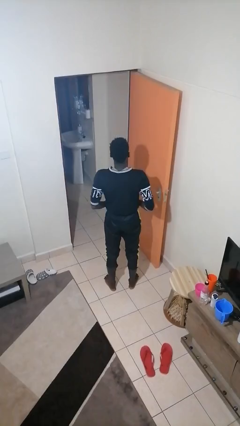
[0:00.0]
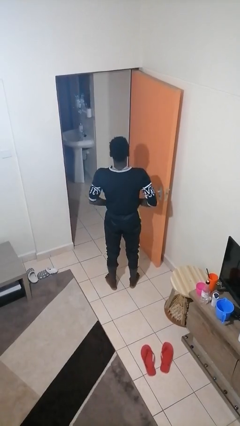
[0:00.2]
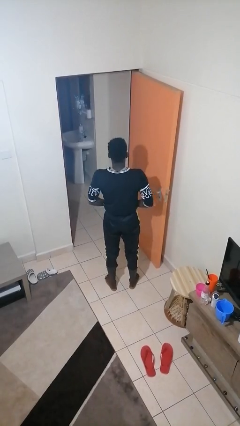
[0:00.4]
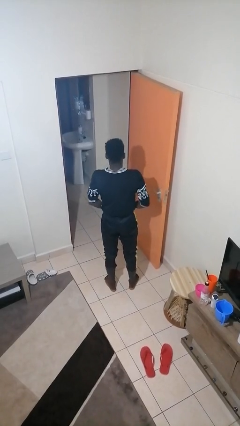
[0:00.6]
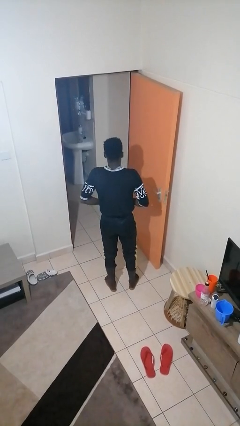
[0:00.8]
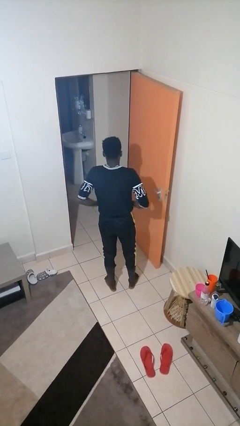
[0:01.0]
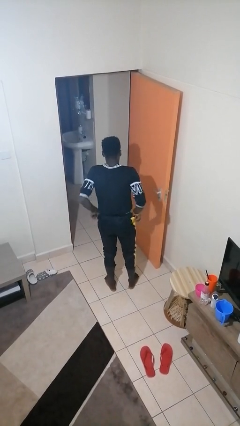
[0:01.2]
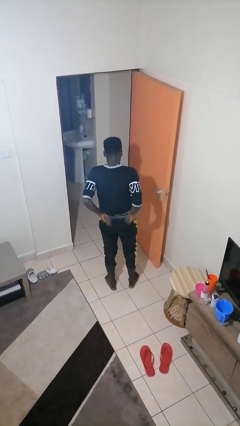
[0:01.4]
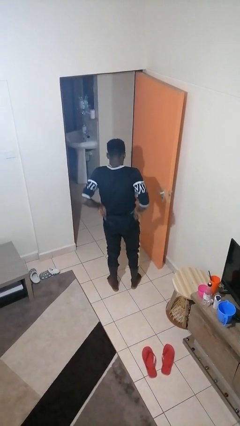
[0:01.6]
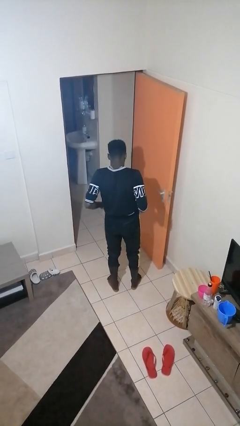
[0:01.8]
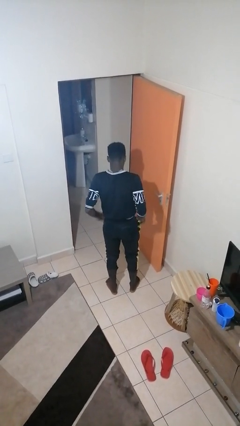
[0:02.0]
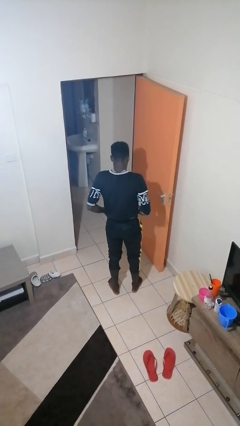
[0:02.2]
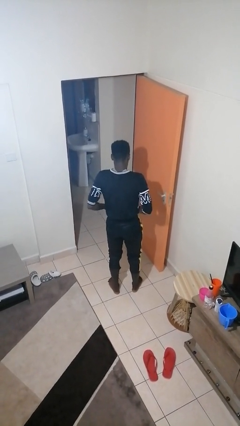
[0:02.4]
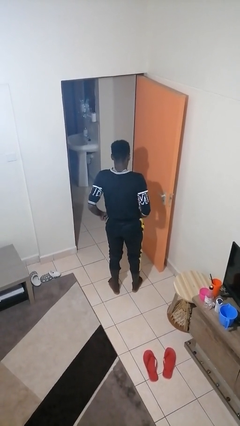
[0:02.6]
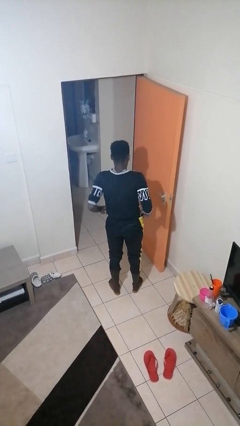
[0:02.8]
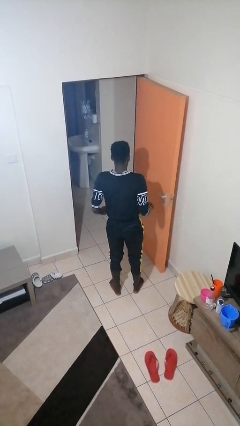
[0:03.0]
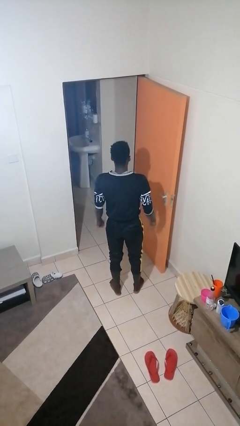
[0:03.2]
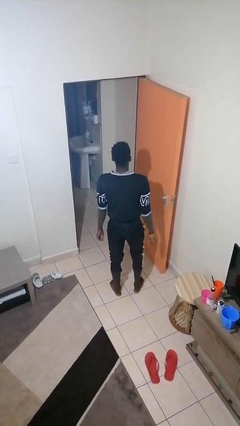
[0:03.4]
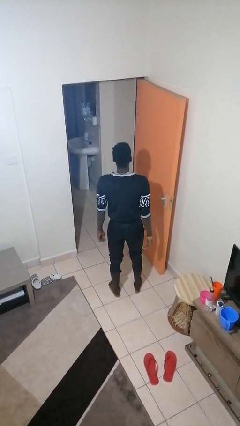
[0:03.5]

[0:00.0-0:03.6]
person hikes up pants

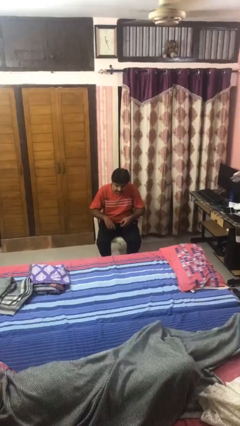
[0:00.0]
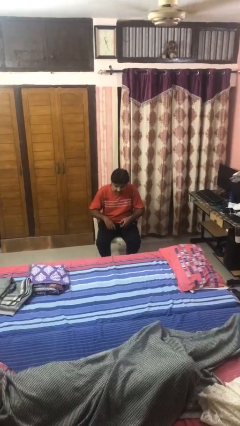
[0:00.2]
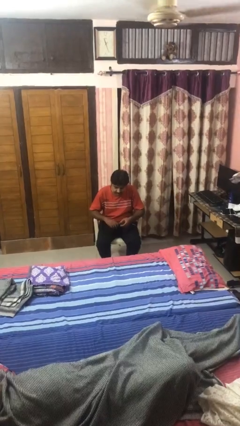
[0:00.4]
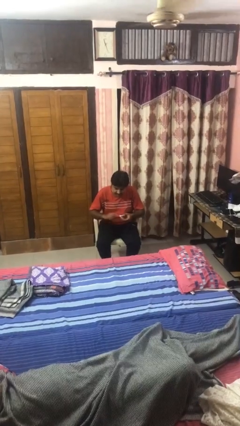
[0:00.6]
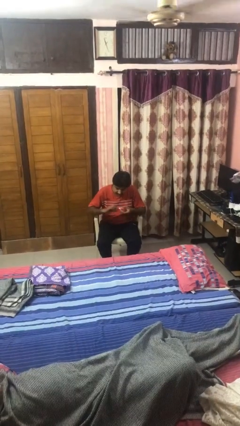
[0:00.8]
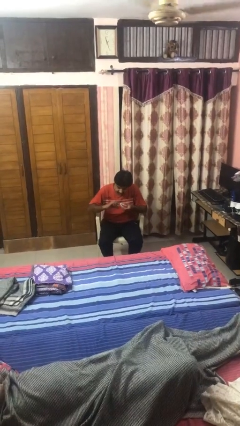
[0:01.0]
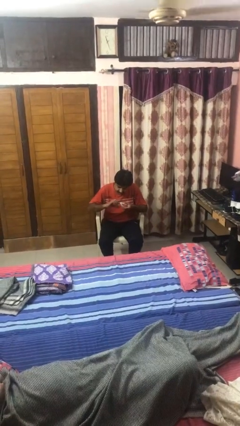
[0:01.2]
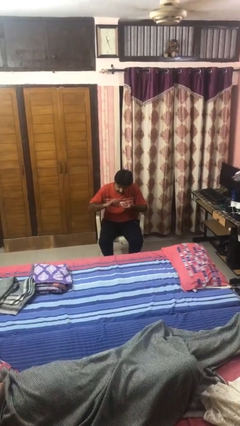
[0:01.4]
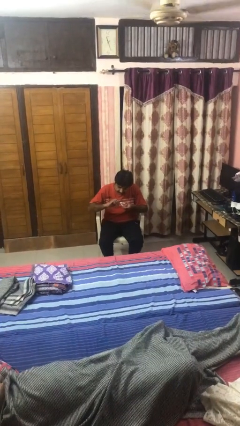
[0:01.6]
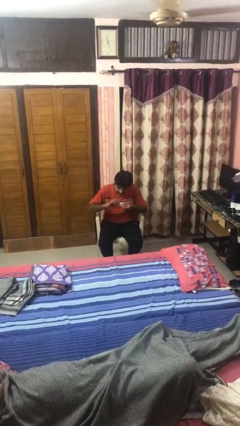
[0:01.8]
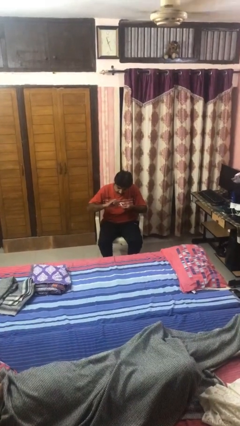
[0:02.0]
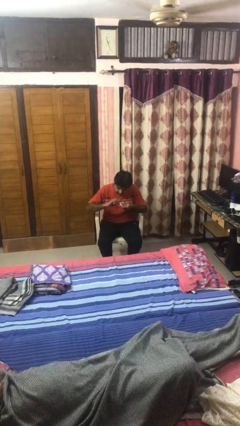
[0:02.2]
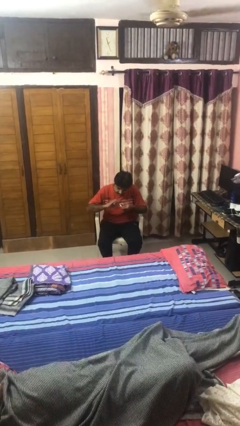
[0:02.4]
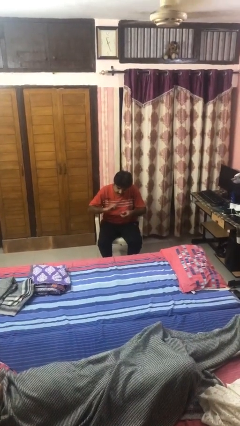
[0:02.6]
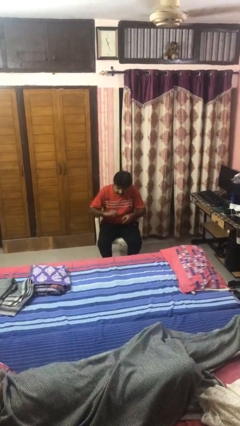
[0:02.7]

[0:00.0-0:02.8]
person clips fingernails

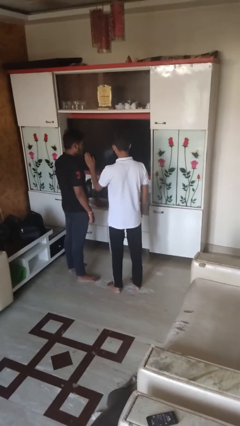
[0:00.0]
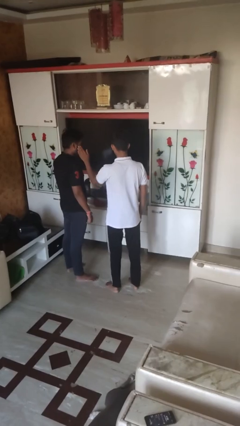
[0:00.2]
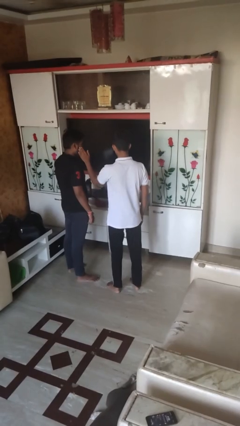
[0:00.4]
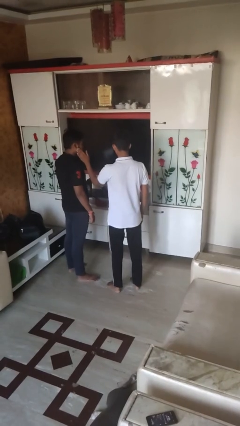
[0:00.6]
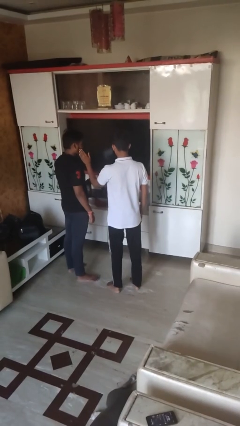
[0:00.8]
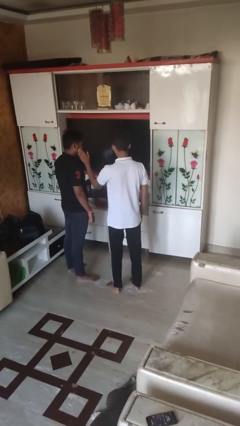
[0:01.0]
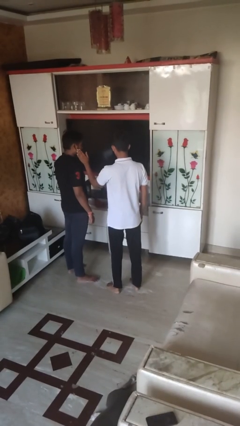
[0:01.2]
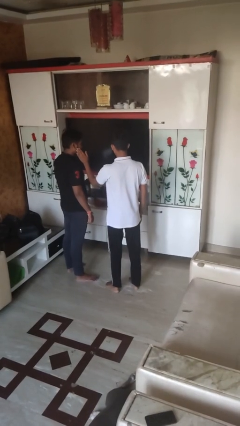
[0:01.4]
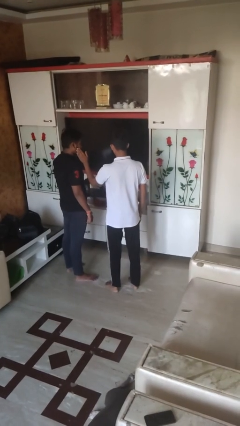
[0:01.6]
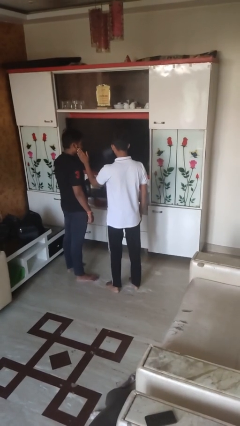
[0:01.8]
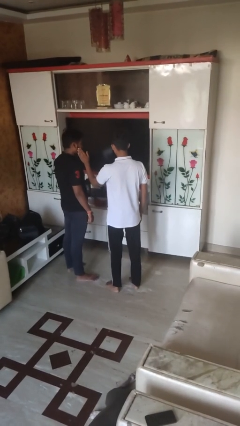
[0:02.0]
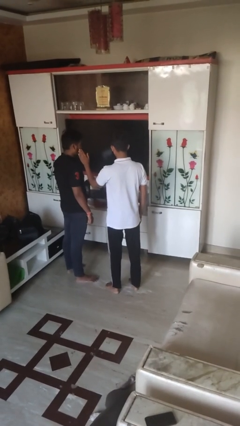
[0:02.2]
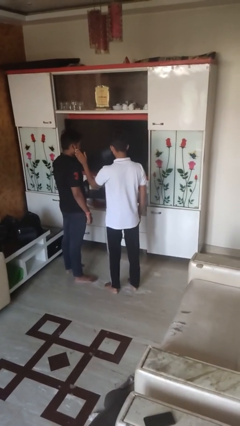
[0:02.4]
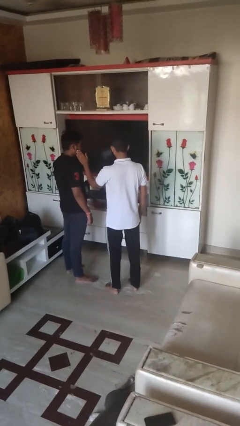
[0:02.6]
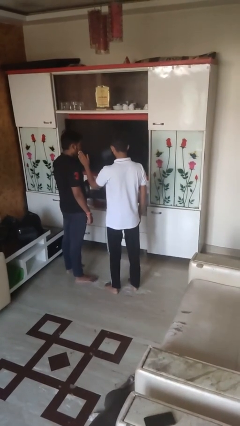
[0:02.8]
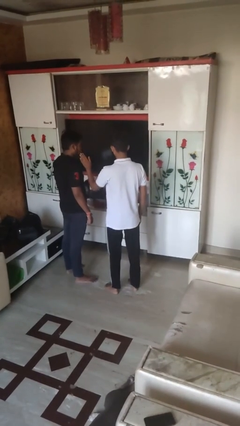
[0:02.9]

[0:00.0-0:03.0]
person touches face of person

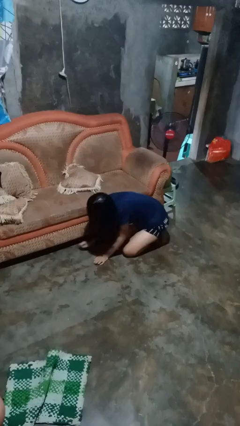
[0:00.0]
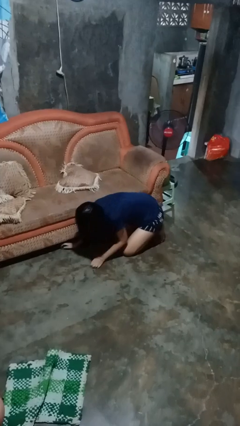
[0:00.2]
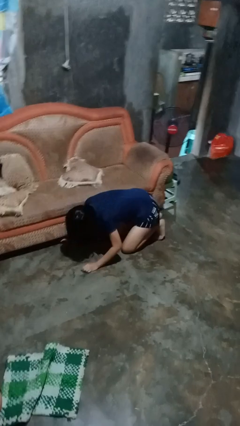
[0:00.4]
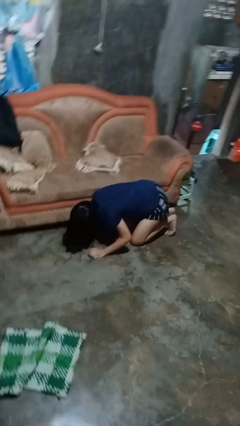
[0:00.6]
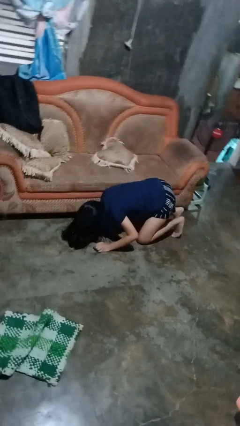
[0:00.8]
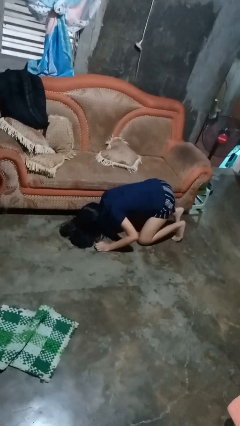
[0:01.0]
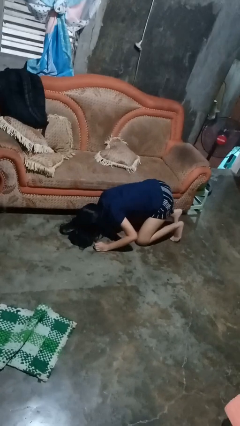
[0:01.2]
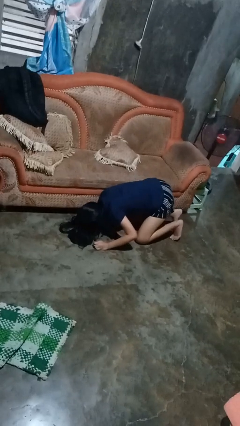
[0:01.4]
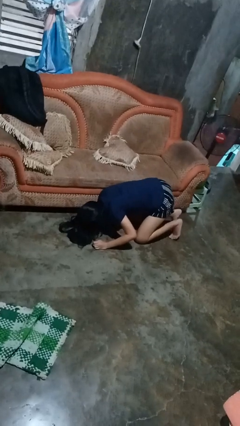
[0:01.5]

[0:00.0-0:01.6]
person searches under couch

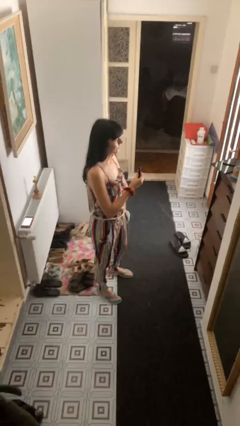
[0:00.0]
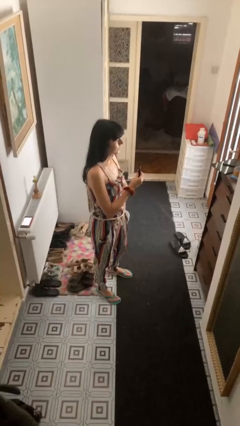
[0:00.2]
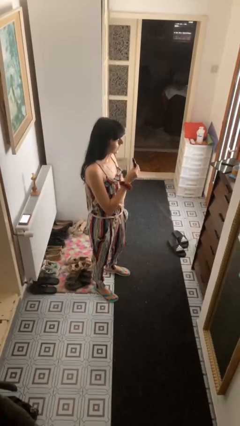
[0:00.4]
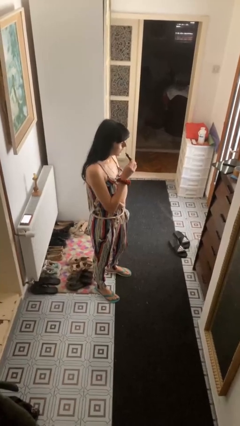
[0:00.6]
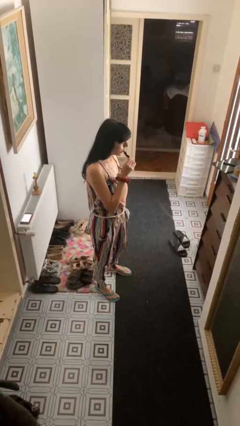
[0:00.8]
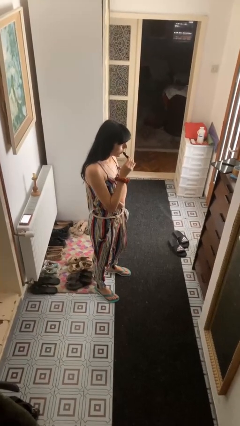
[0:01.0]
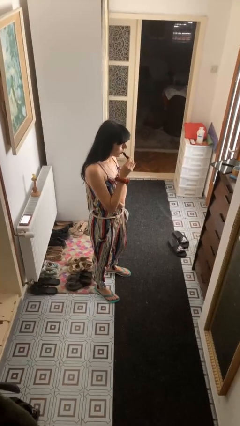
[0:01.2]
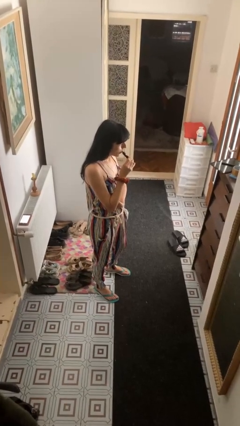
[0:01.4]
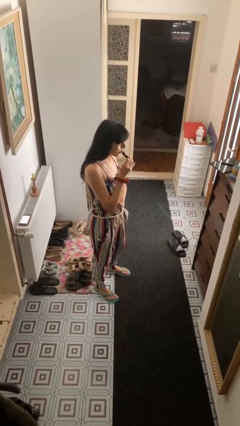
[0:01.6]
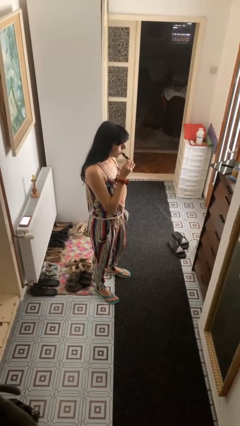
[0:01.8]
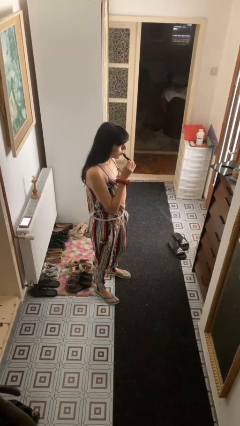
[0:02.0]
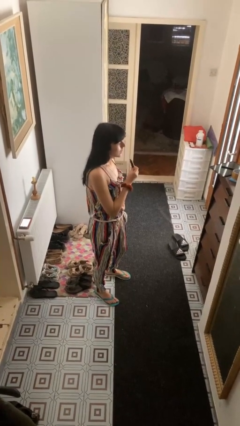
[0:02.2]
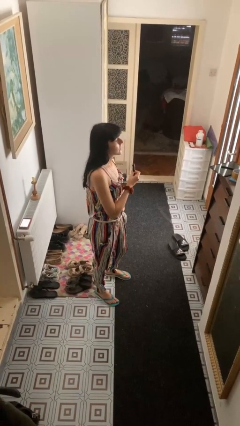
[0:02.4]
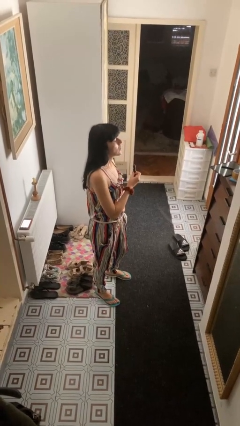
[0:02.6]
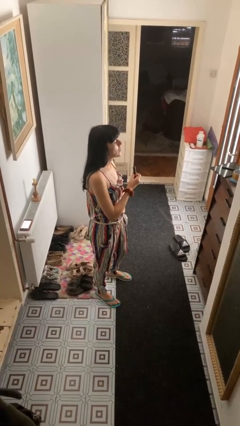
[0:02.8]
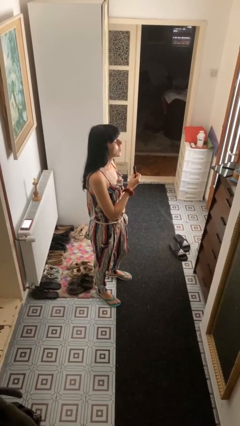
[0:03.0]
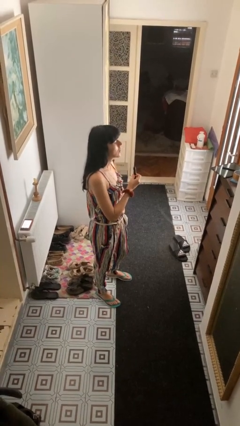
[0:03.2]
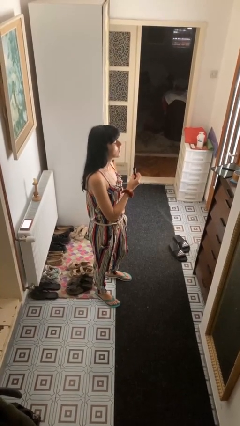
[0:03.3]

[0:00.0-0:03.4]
person vapes

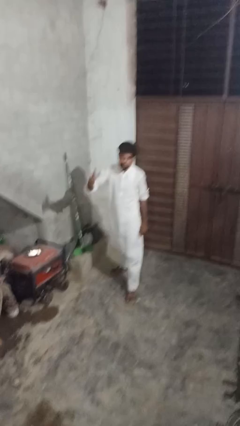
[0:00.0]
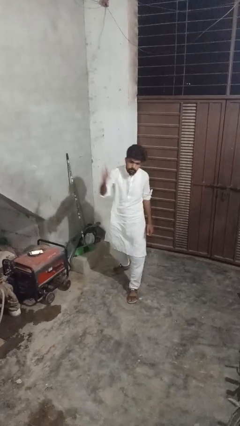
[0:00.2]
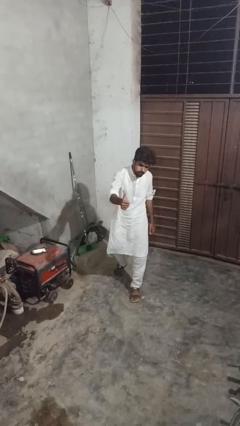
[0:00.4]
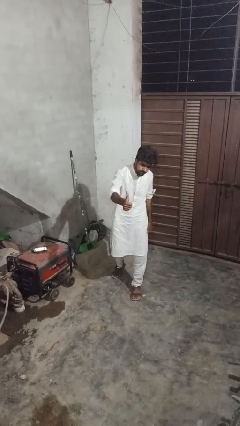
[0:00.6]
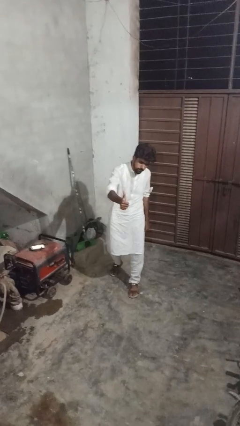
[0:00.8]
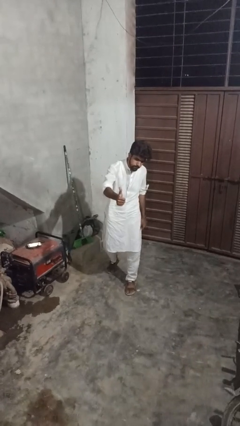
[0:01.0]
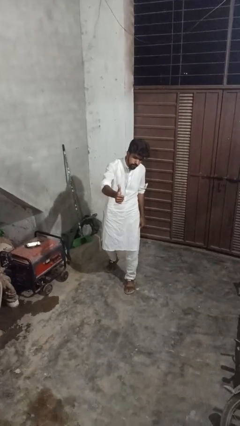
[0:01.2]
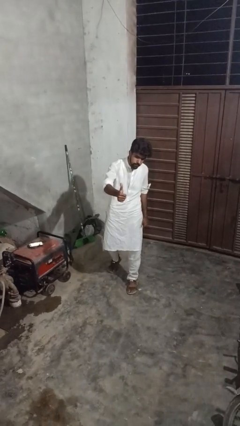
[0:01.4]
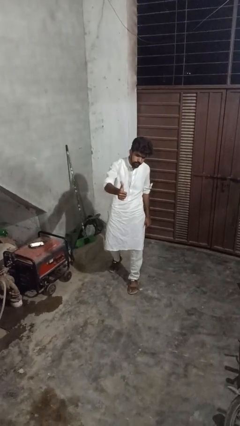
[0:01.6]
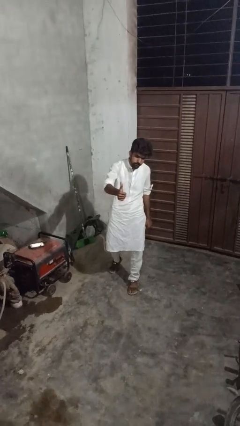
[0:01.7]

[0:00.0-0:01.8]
person gestures thumbs up

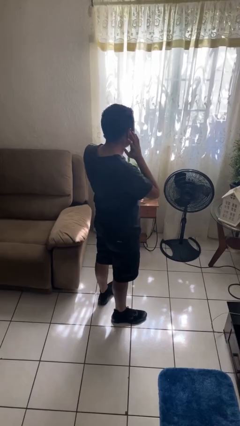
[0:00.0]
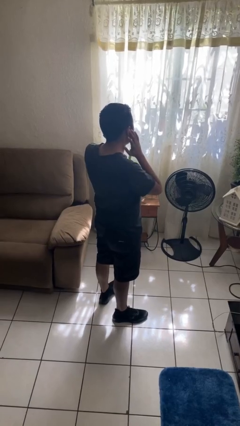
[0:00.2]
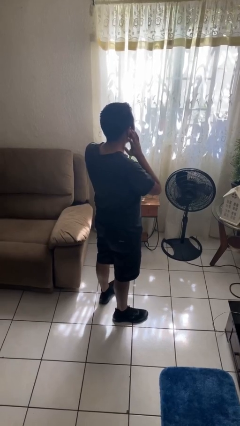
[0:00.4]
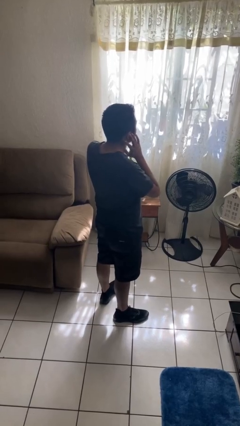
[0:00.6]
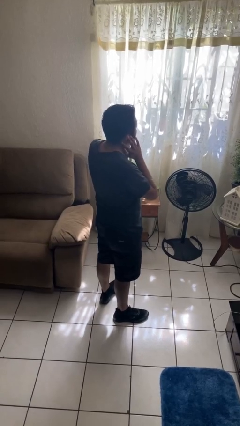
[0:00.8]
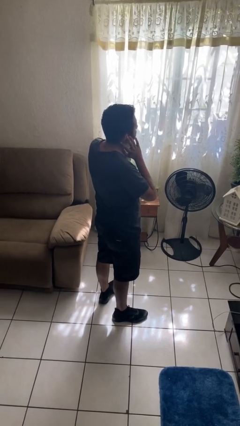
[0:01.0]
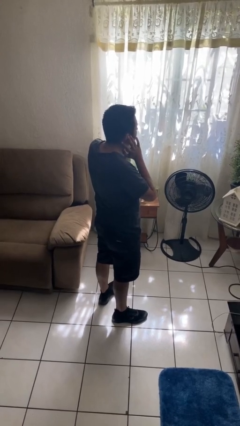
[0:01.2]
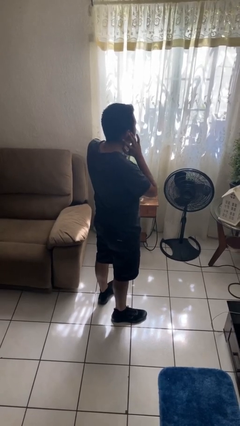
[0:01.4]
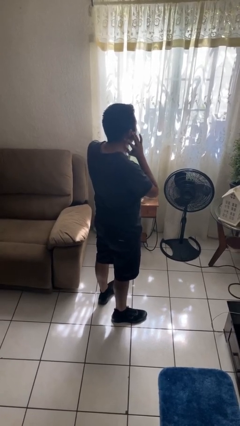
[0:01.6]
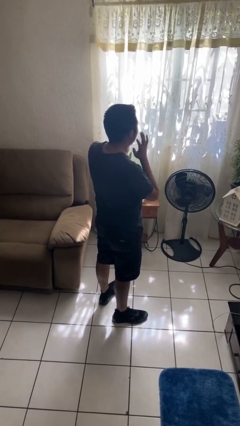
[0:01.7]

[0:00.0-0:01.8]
person puts fingers in ear
